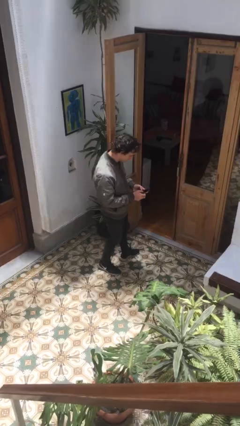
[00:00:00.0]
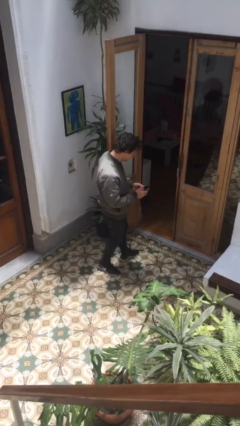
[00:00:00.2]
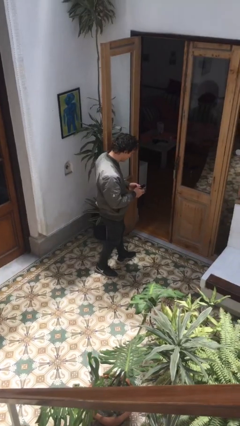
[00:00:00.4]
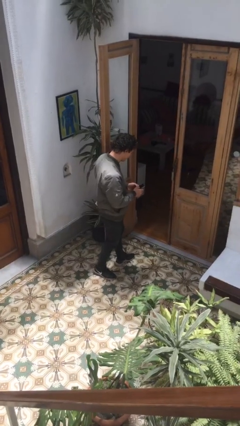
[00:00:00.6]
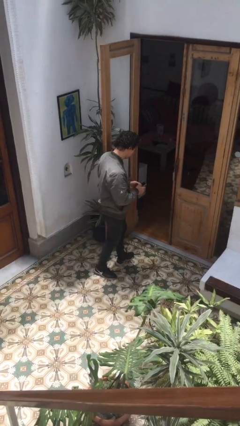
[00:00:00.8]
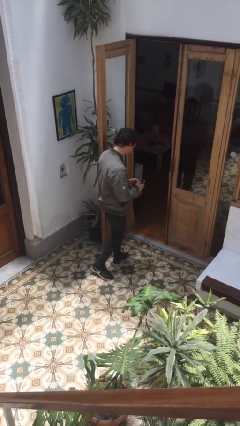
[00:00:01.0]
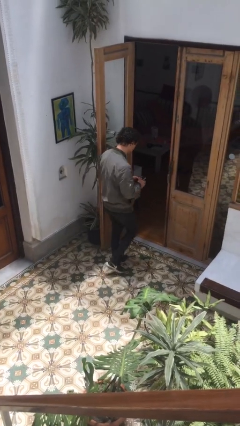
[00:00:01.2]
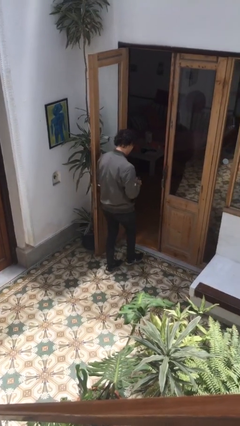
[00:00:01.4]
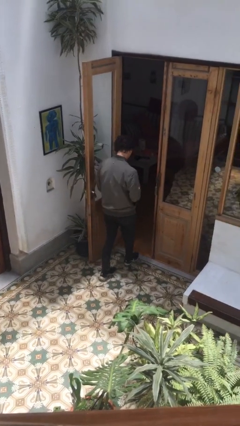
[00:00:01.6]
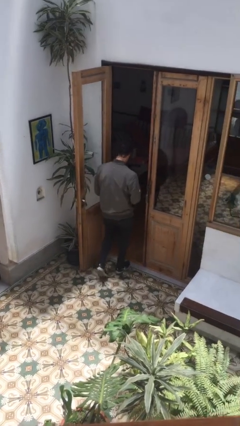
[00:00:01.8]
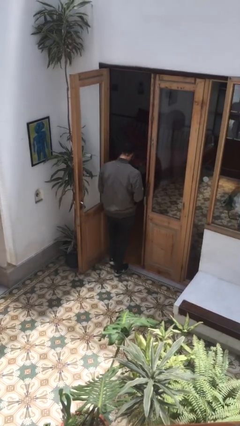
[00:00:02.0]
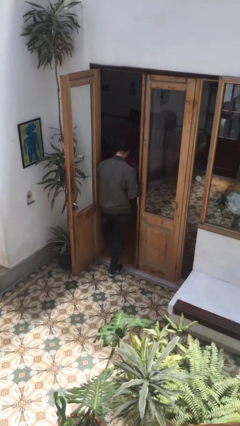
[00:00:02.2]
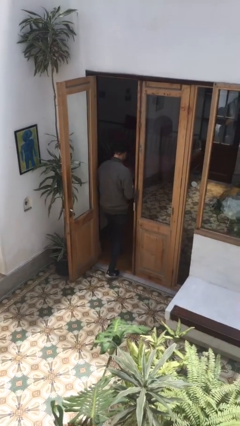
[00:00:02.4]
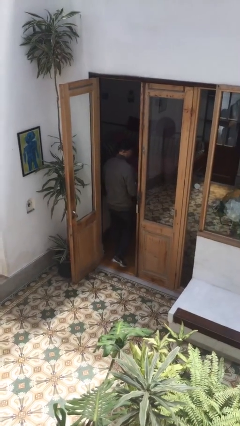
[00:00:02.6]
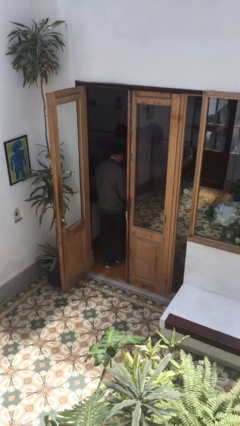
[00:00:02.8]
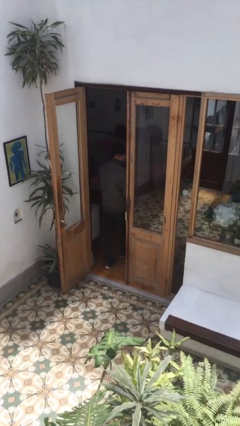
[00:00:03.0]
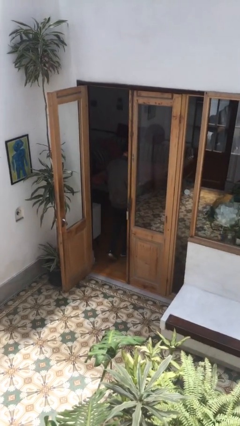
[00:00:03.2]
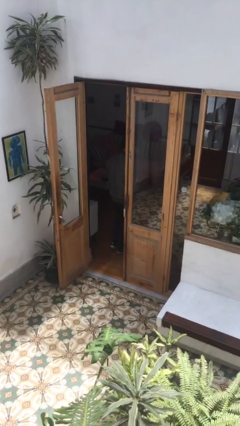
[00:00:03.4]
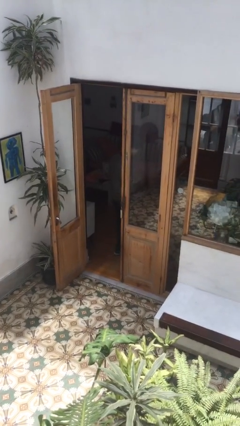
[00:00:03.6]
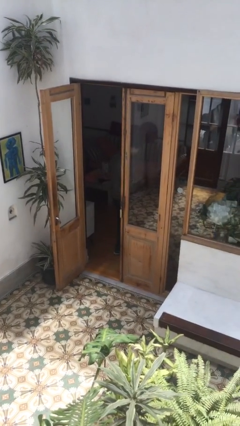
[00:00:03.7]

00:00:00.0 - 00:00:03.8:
person exits scene through structure

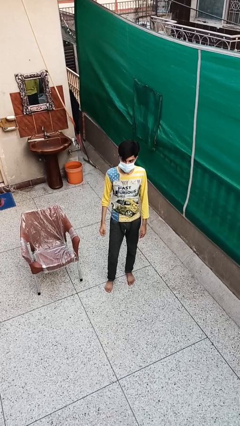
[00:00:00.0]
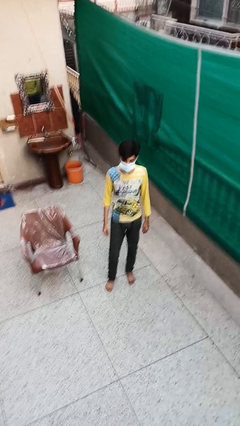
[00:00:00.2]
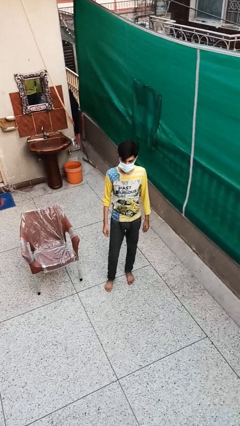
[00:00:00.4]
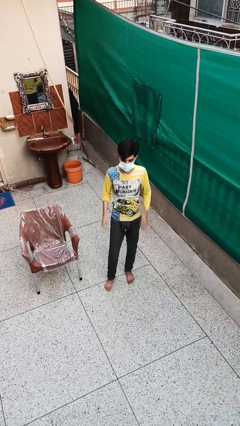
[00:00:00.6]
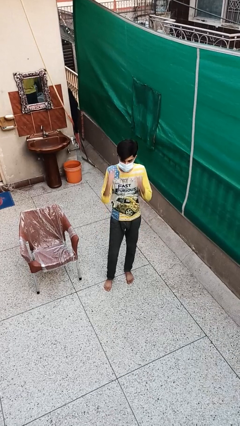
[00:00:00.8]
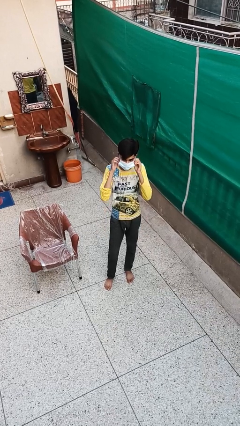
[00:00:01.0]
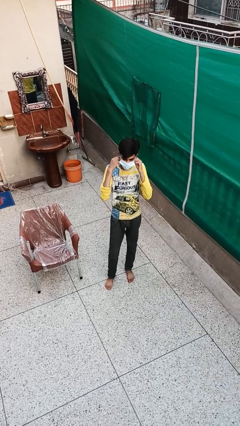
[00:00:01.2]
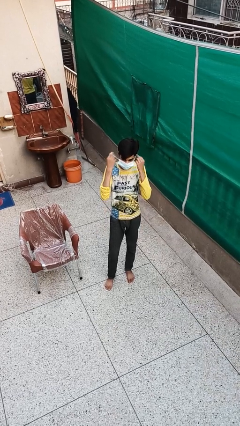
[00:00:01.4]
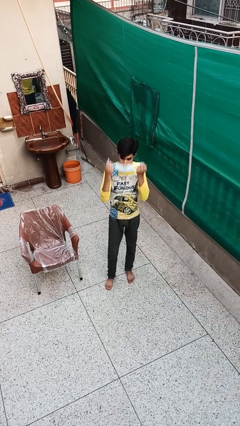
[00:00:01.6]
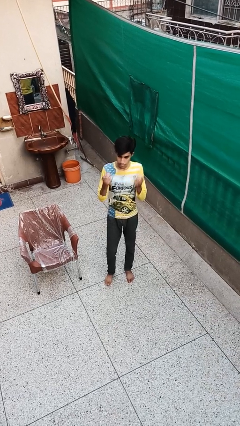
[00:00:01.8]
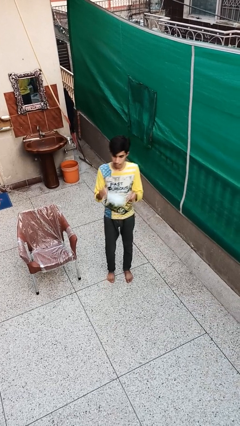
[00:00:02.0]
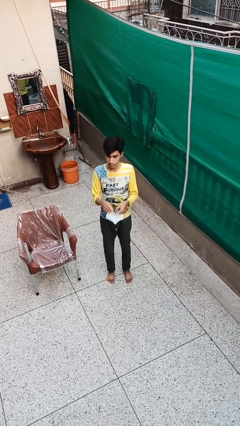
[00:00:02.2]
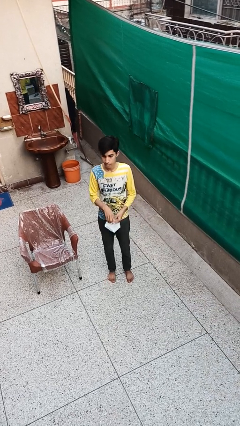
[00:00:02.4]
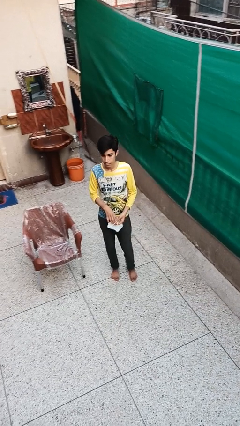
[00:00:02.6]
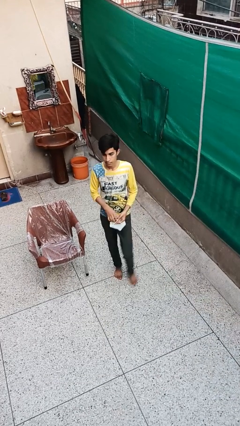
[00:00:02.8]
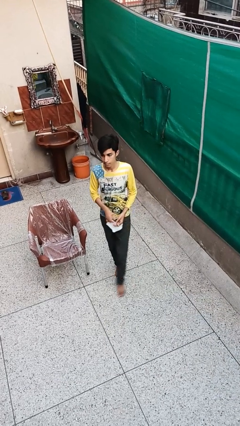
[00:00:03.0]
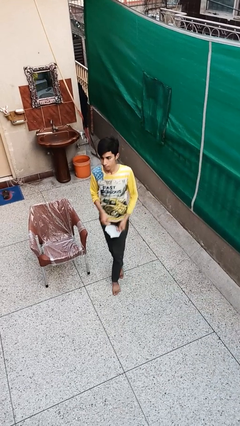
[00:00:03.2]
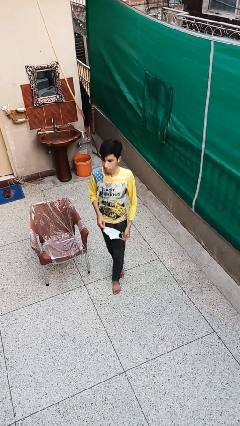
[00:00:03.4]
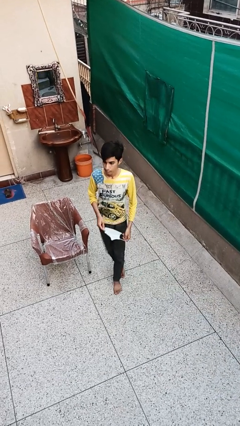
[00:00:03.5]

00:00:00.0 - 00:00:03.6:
person takes off facemask

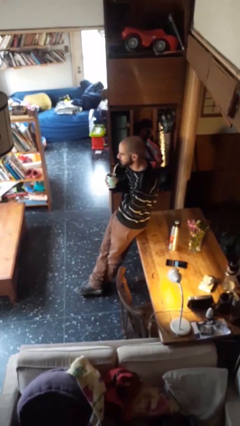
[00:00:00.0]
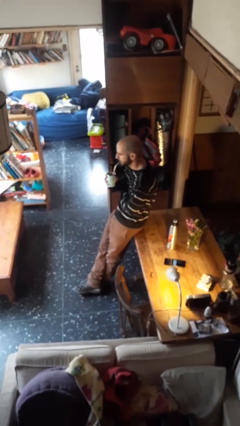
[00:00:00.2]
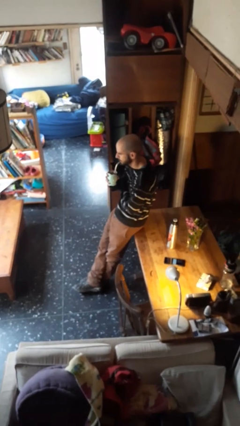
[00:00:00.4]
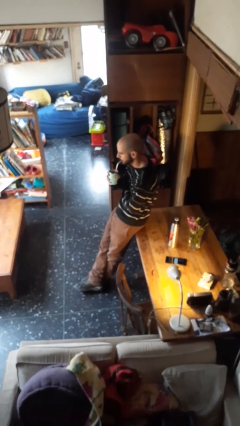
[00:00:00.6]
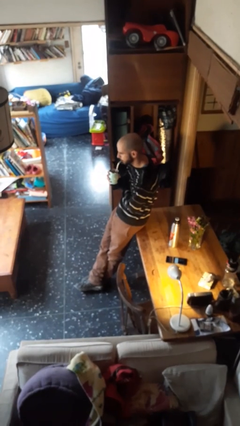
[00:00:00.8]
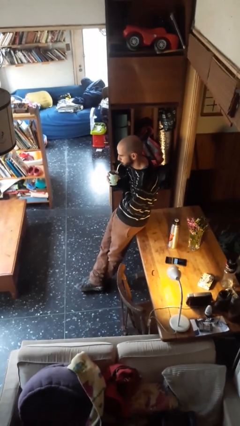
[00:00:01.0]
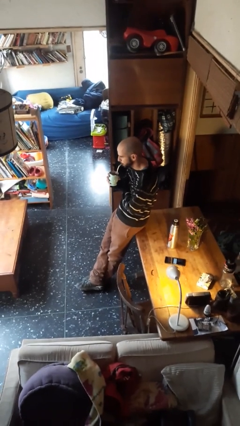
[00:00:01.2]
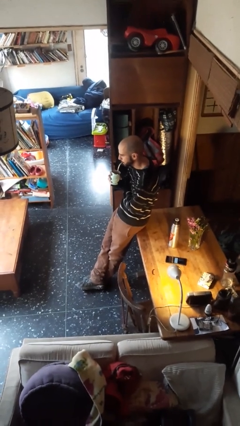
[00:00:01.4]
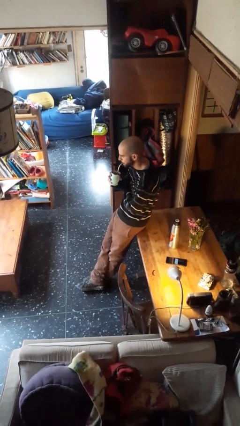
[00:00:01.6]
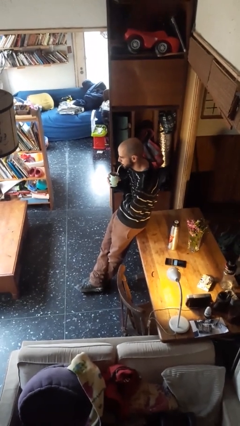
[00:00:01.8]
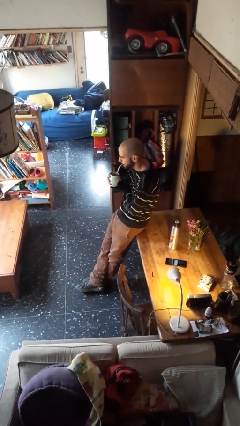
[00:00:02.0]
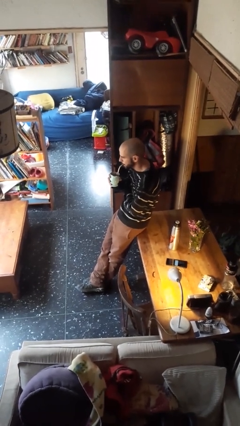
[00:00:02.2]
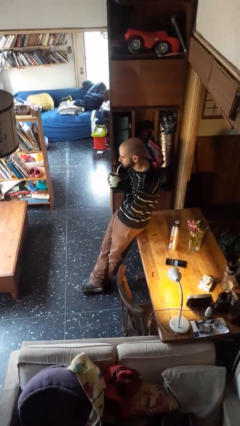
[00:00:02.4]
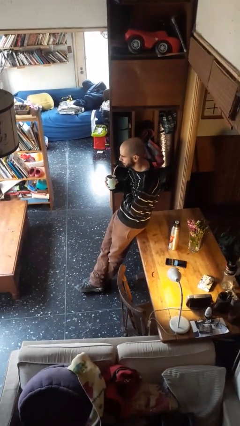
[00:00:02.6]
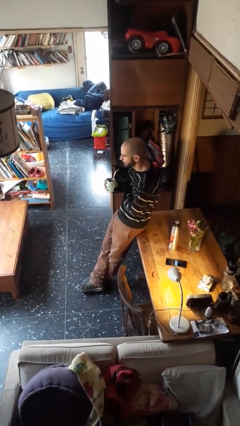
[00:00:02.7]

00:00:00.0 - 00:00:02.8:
person drinks from straw

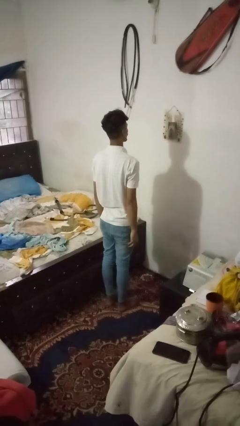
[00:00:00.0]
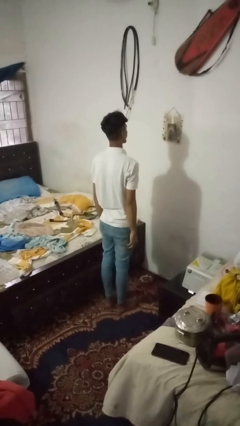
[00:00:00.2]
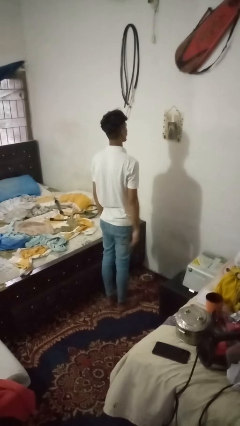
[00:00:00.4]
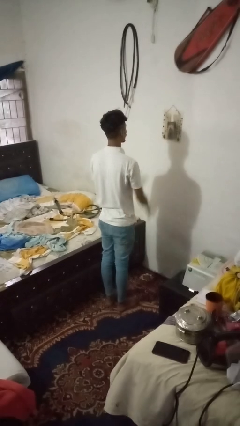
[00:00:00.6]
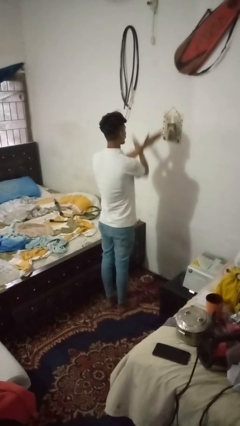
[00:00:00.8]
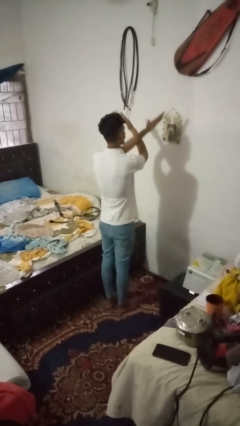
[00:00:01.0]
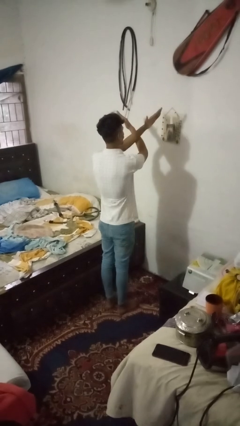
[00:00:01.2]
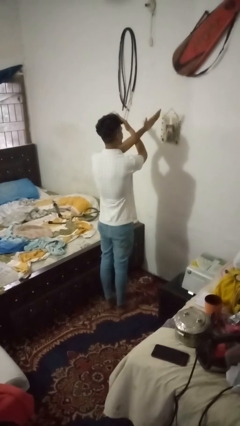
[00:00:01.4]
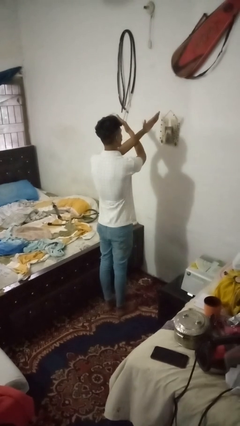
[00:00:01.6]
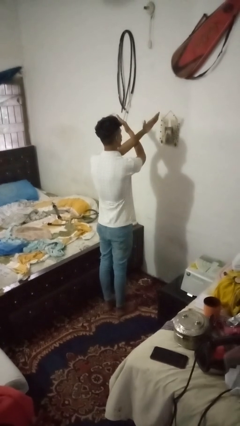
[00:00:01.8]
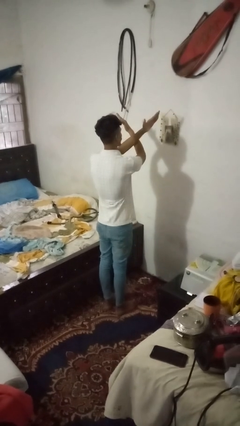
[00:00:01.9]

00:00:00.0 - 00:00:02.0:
person gestures arms x

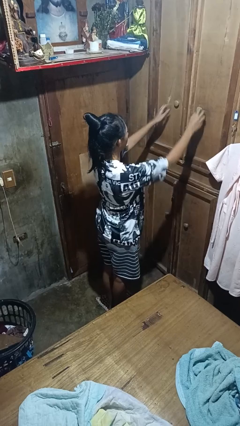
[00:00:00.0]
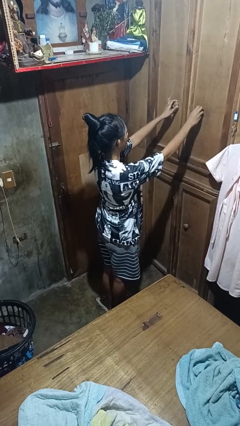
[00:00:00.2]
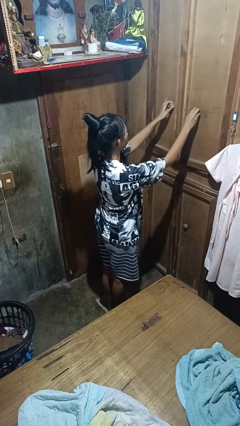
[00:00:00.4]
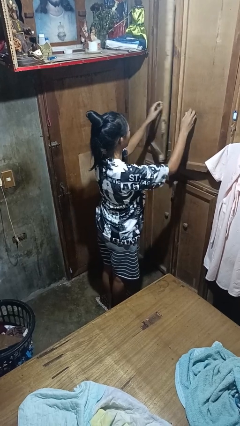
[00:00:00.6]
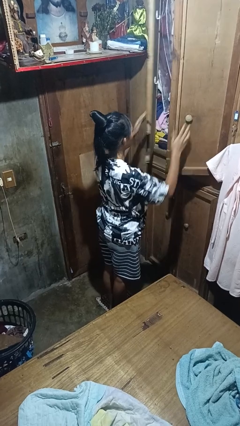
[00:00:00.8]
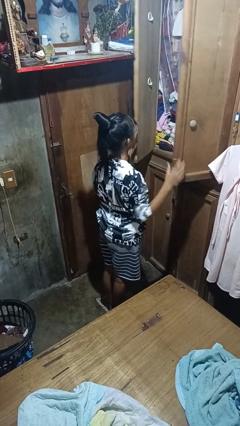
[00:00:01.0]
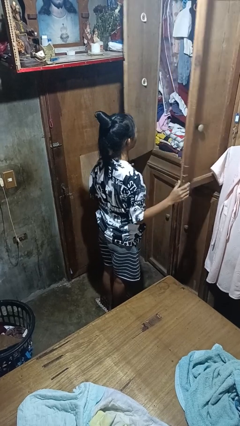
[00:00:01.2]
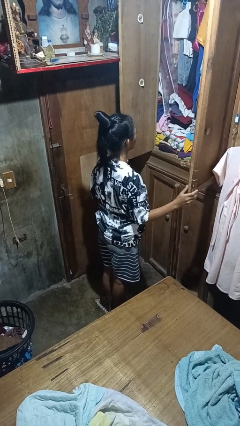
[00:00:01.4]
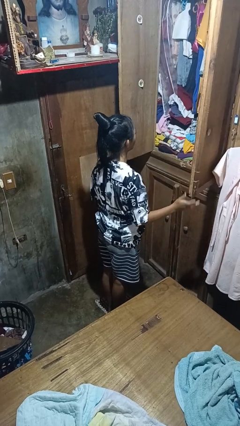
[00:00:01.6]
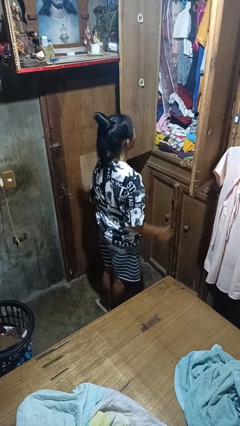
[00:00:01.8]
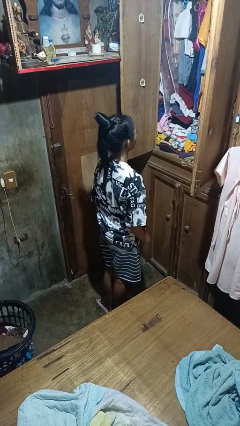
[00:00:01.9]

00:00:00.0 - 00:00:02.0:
person opens closet door

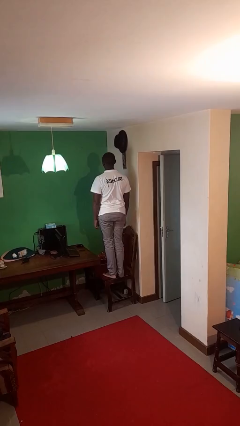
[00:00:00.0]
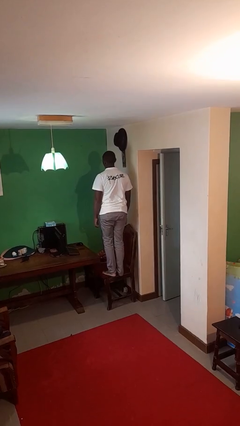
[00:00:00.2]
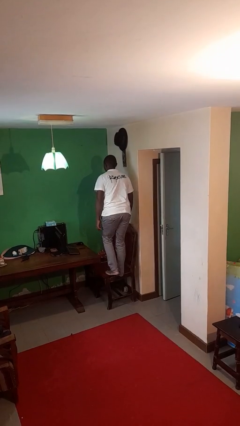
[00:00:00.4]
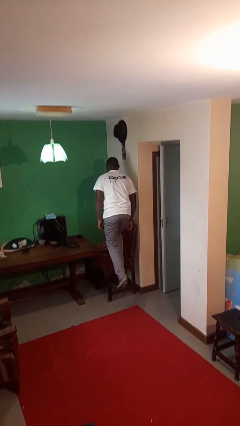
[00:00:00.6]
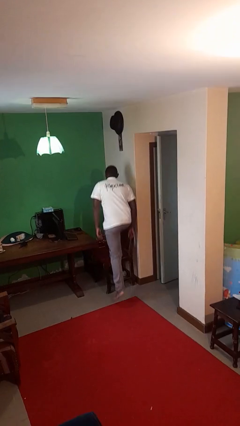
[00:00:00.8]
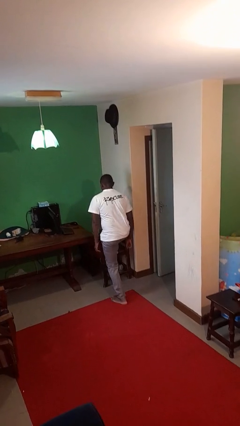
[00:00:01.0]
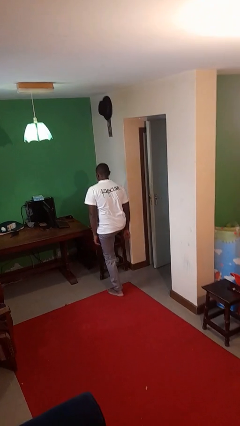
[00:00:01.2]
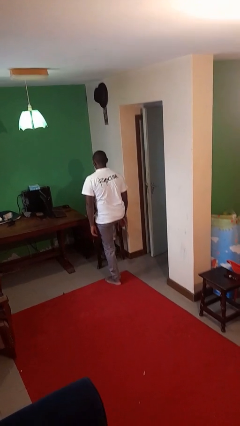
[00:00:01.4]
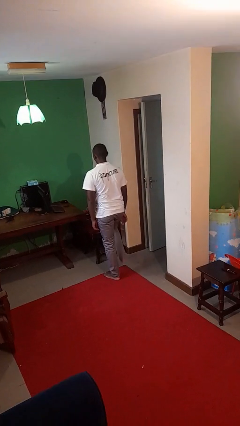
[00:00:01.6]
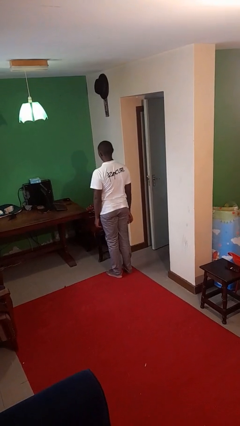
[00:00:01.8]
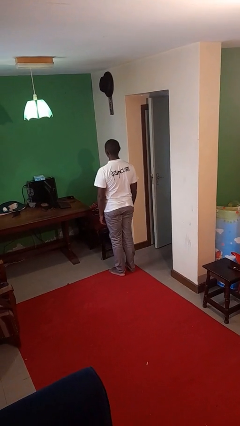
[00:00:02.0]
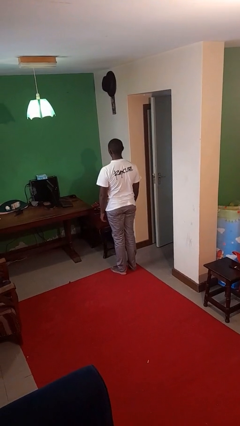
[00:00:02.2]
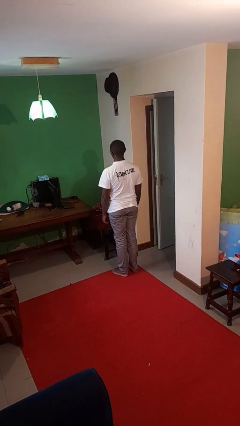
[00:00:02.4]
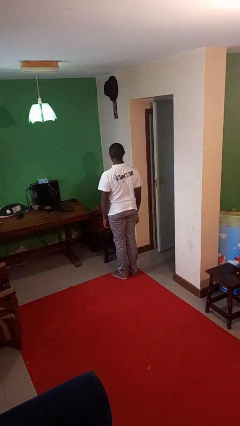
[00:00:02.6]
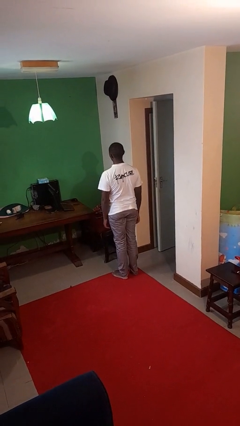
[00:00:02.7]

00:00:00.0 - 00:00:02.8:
person climbs off chair
